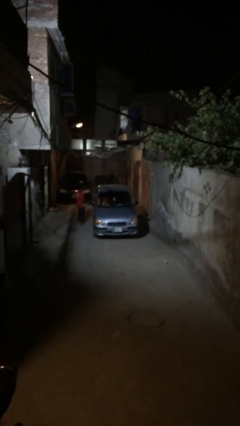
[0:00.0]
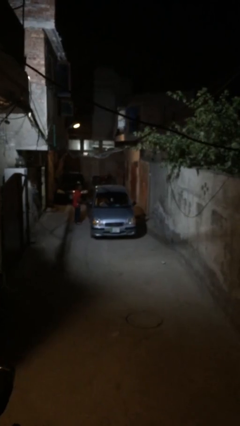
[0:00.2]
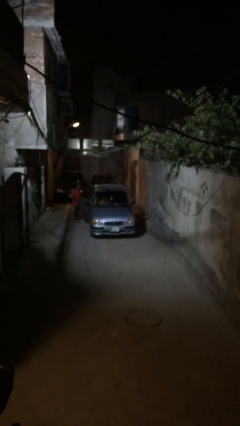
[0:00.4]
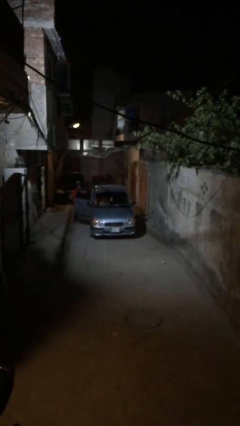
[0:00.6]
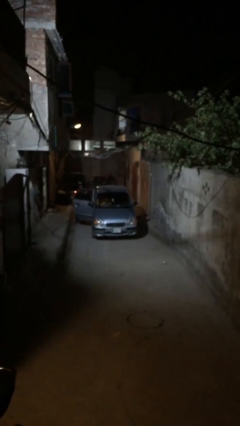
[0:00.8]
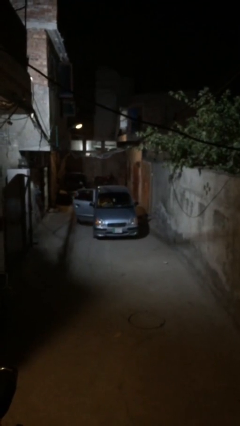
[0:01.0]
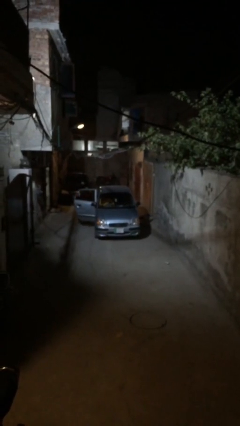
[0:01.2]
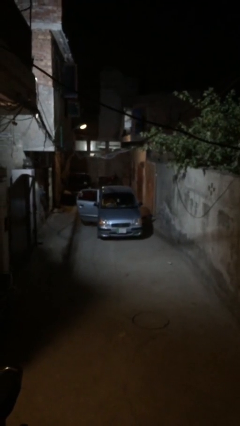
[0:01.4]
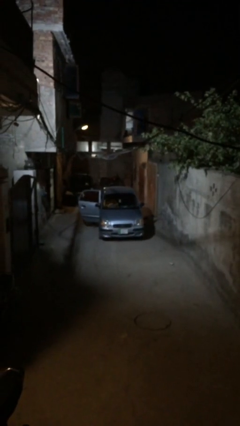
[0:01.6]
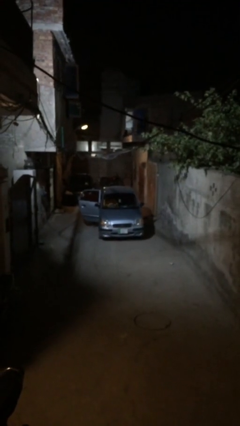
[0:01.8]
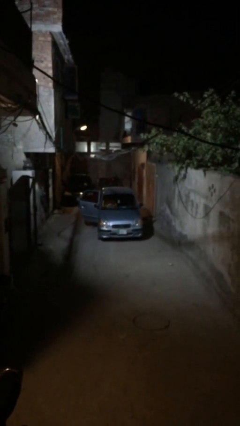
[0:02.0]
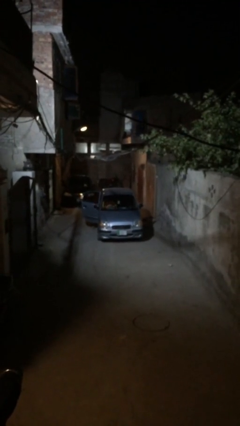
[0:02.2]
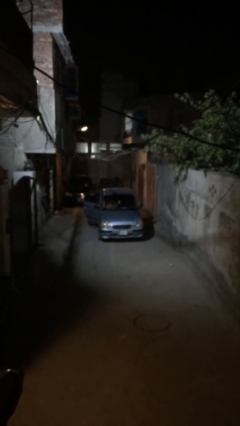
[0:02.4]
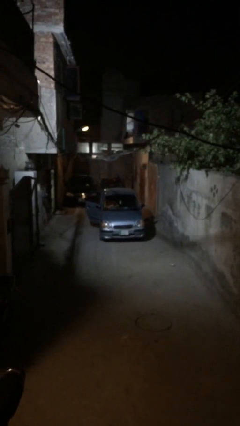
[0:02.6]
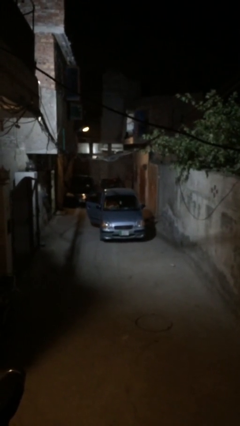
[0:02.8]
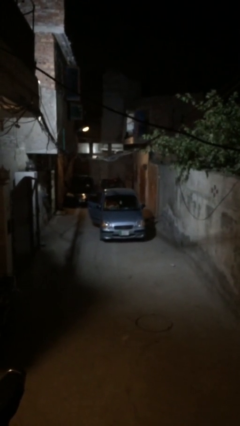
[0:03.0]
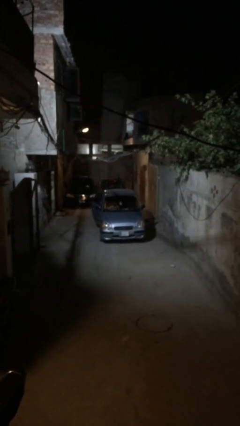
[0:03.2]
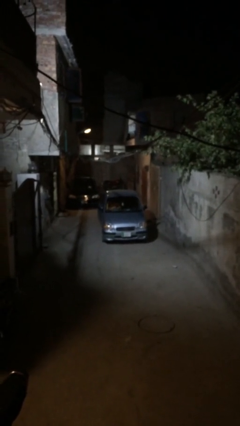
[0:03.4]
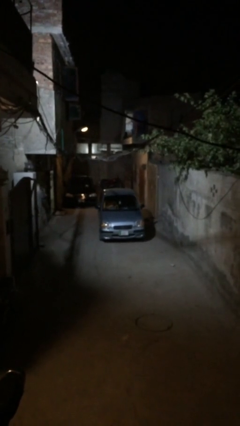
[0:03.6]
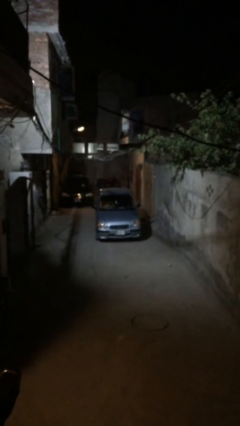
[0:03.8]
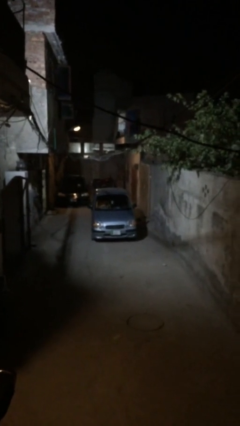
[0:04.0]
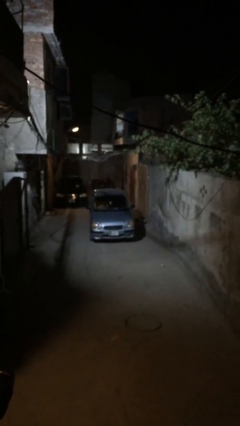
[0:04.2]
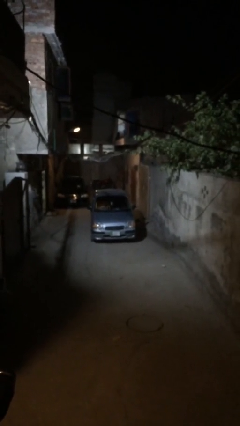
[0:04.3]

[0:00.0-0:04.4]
car picks up person

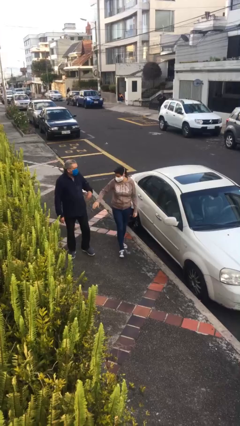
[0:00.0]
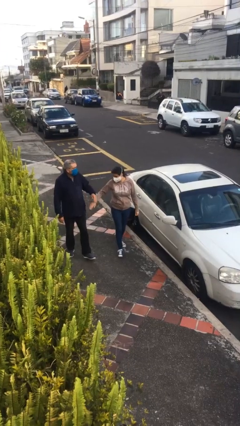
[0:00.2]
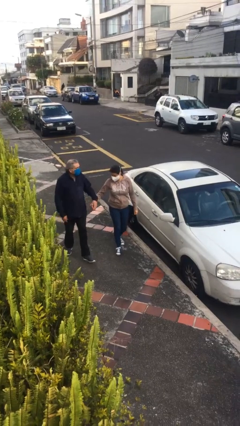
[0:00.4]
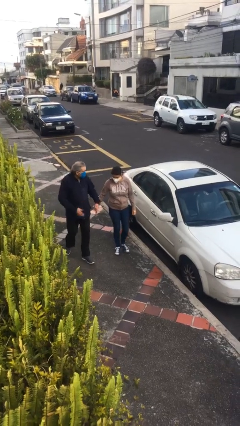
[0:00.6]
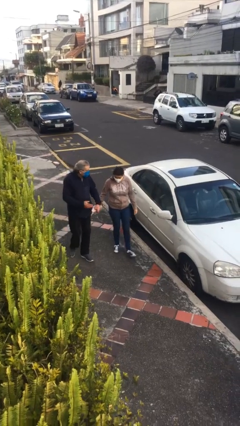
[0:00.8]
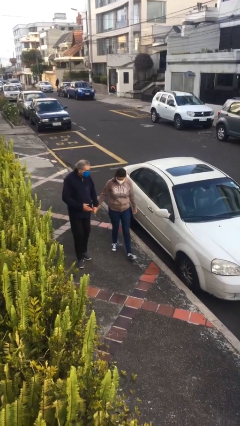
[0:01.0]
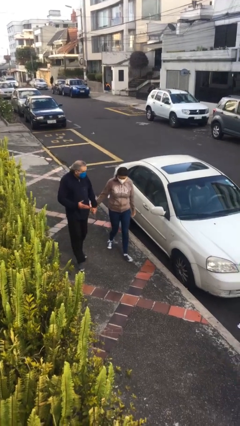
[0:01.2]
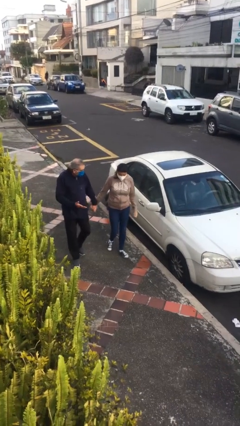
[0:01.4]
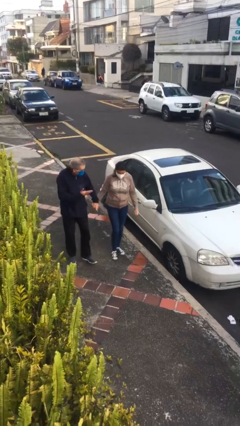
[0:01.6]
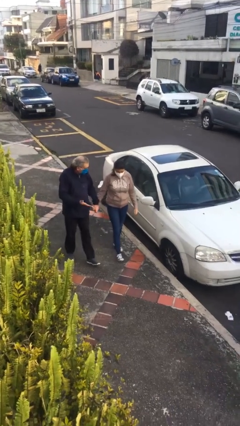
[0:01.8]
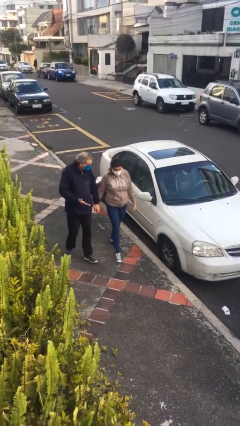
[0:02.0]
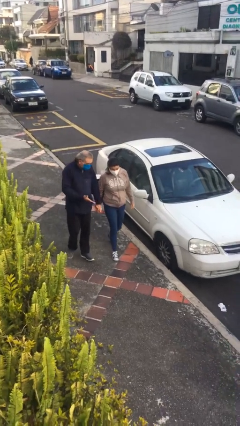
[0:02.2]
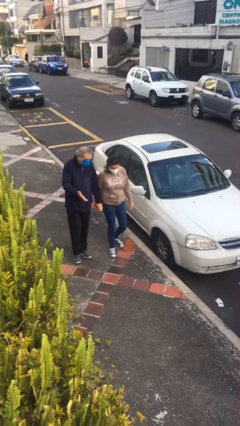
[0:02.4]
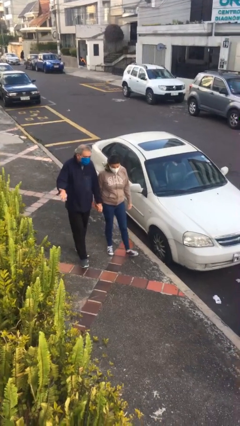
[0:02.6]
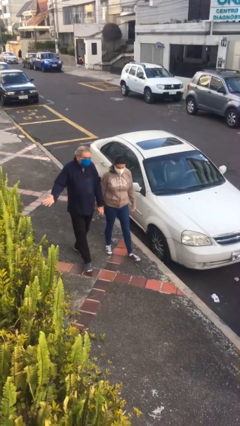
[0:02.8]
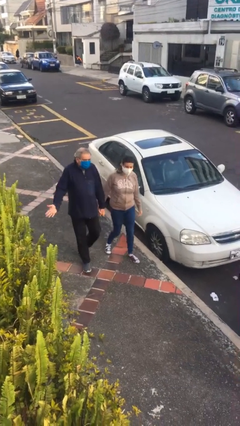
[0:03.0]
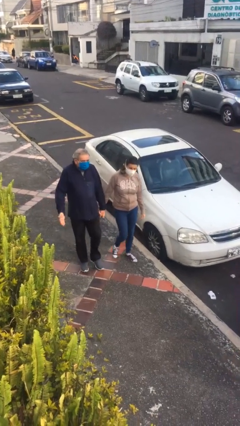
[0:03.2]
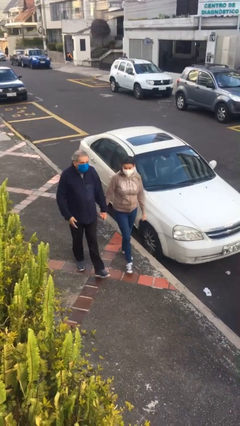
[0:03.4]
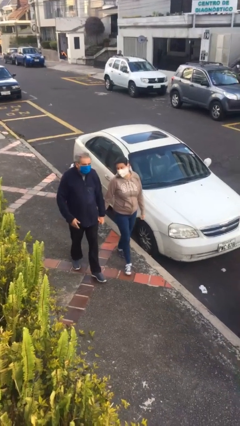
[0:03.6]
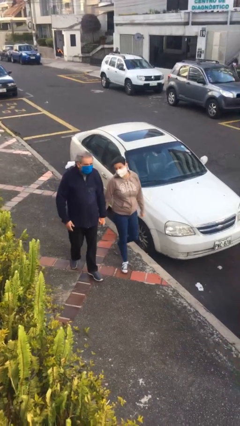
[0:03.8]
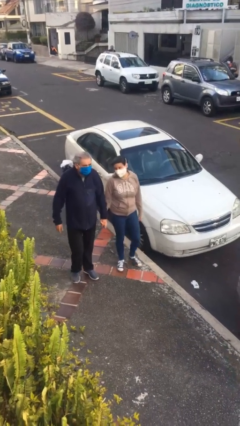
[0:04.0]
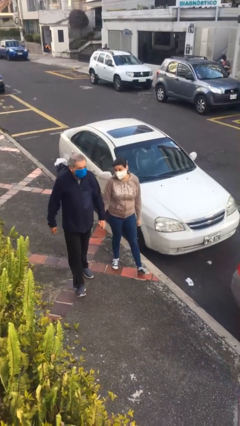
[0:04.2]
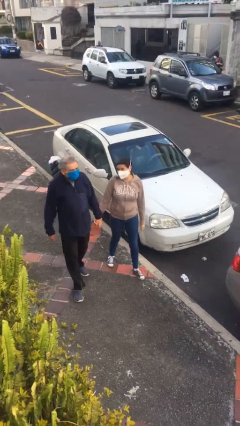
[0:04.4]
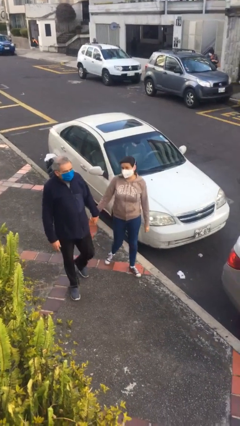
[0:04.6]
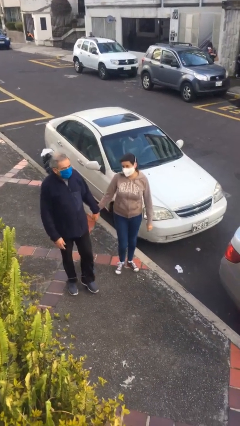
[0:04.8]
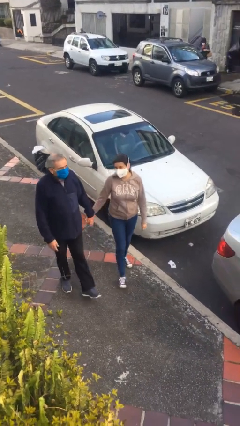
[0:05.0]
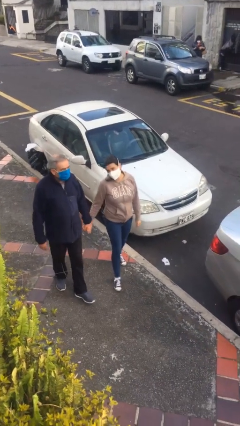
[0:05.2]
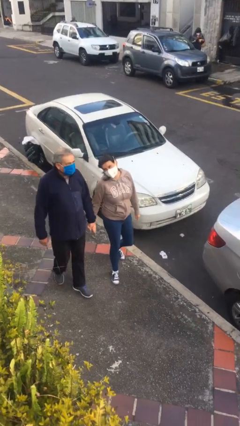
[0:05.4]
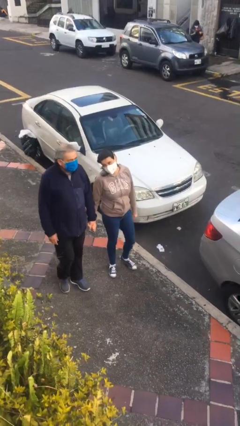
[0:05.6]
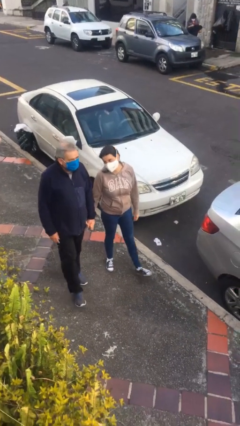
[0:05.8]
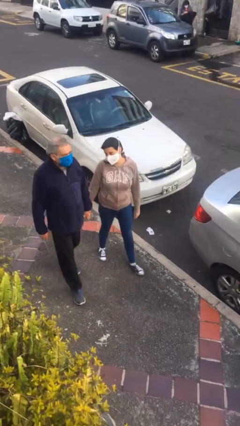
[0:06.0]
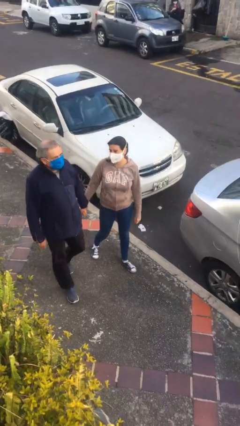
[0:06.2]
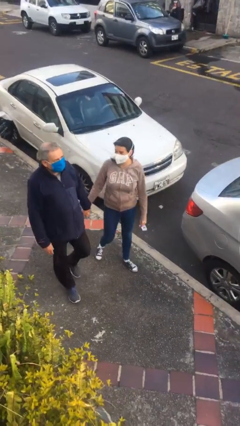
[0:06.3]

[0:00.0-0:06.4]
person holds hand

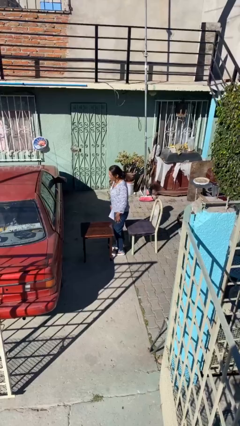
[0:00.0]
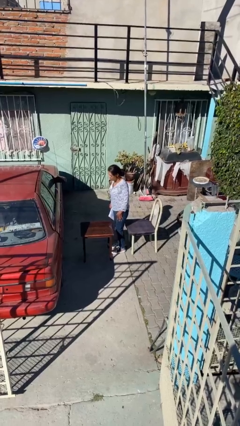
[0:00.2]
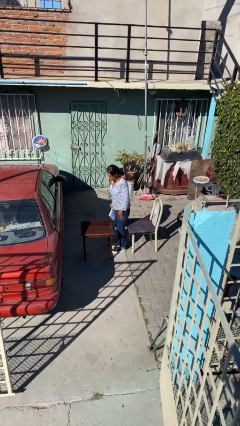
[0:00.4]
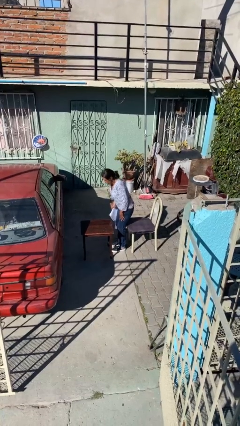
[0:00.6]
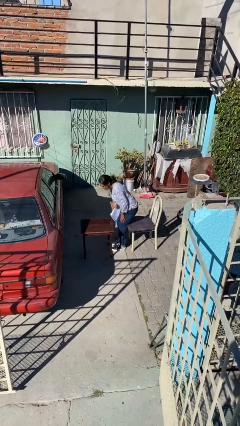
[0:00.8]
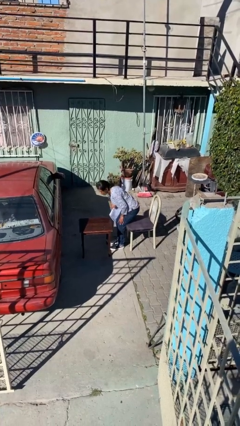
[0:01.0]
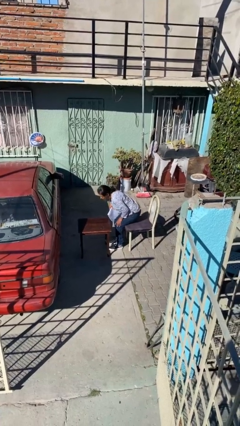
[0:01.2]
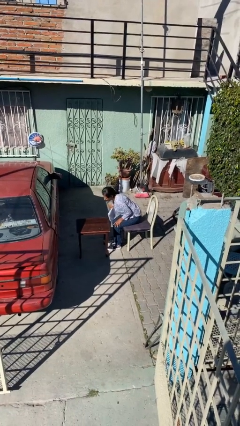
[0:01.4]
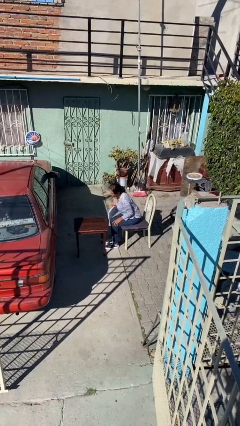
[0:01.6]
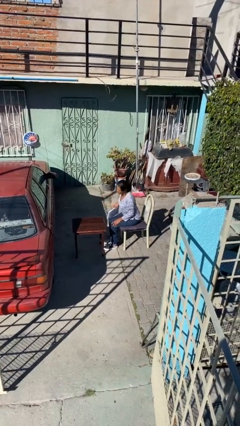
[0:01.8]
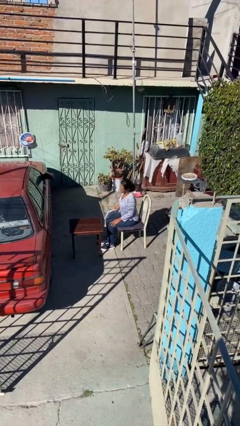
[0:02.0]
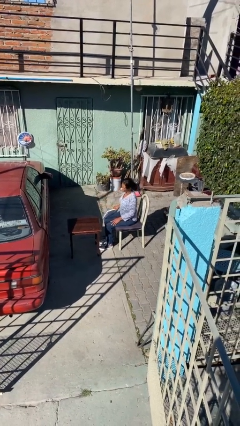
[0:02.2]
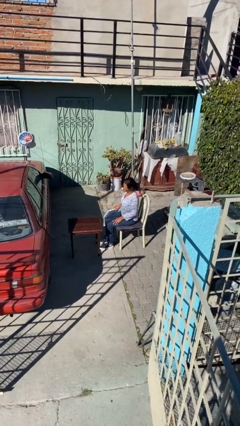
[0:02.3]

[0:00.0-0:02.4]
person sits down

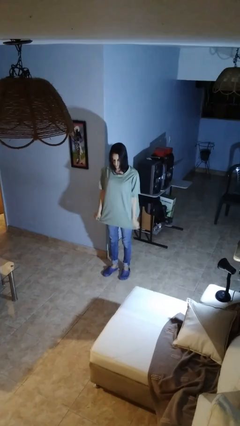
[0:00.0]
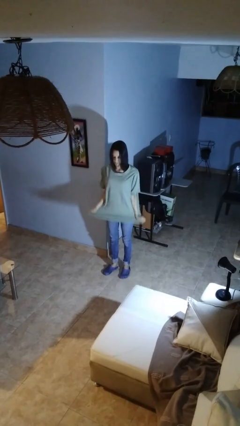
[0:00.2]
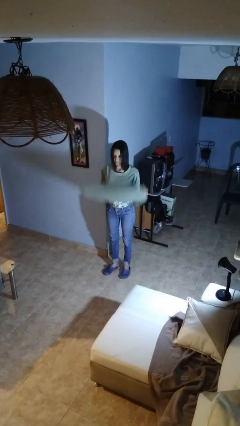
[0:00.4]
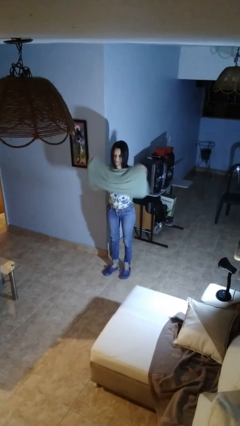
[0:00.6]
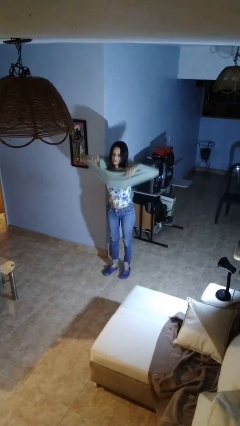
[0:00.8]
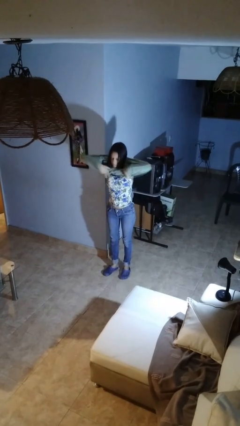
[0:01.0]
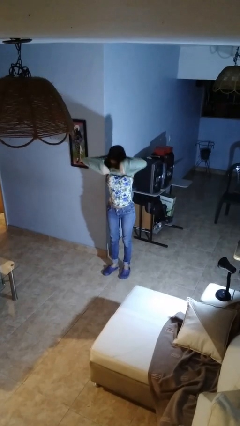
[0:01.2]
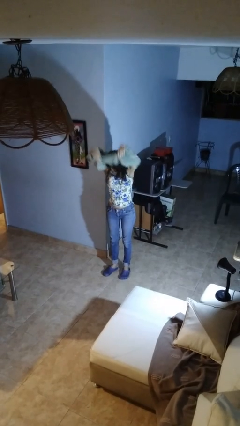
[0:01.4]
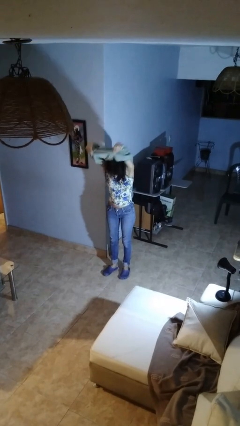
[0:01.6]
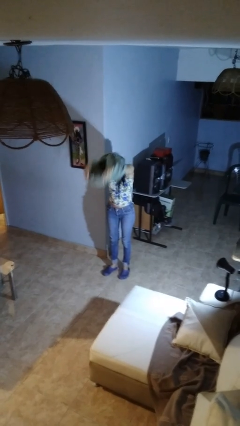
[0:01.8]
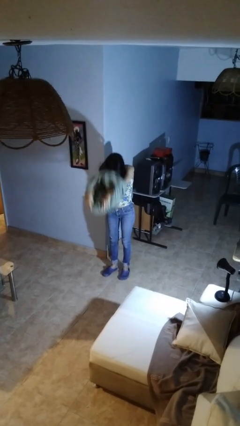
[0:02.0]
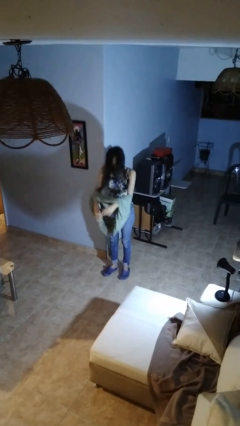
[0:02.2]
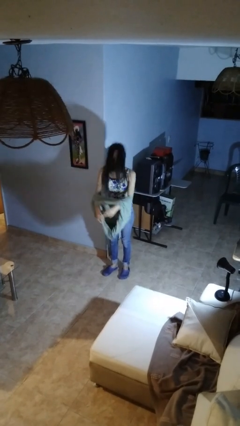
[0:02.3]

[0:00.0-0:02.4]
person takes off shirt

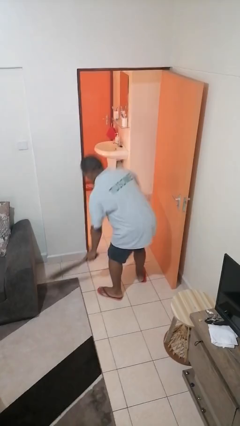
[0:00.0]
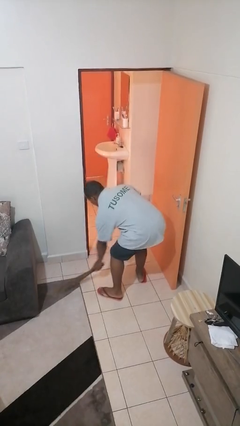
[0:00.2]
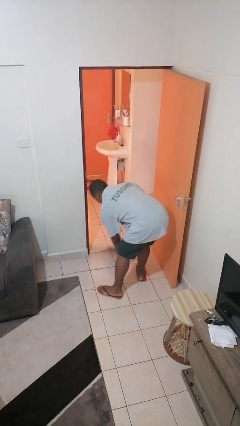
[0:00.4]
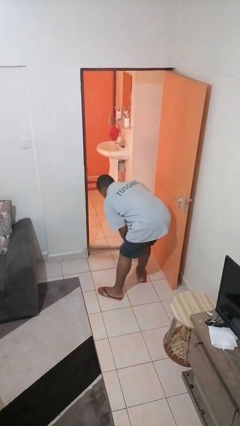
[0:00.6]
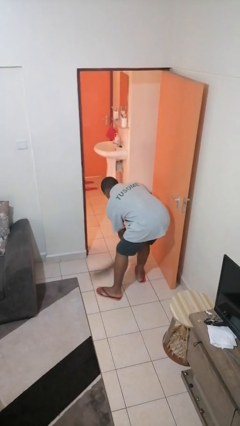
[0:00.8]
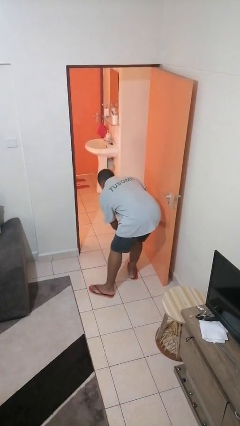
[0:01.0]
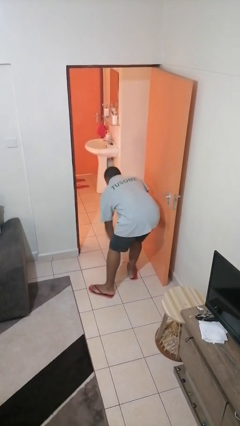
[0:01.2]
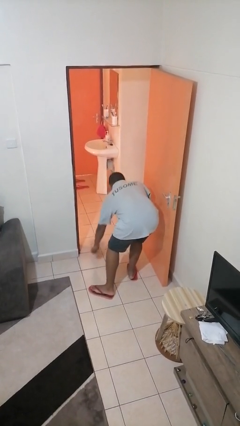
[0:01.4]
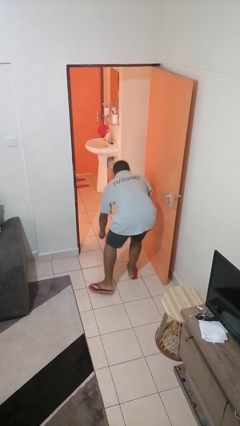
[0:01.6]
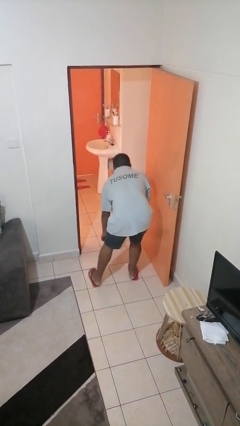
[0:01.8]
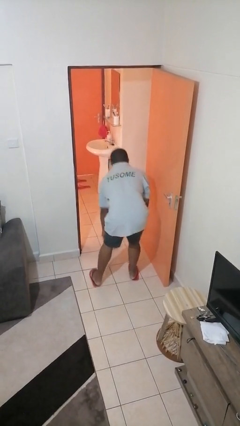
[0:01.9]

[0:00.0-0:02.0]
person sweeps floor
